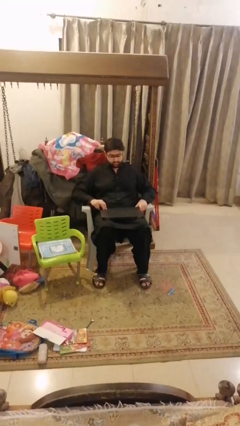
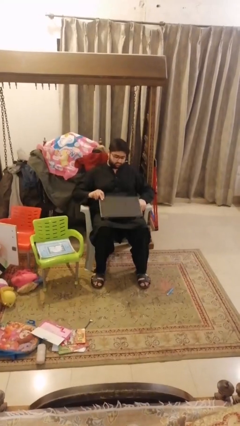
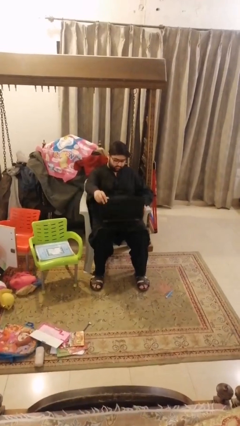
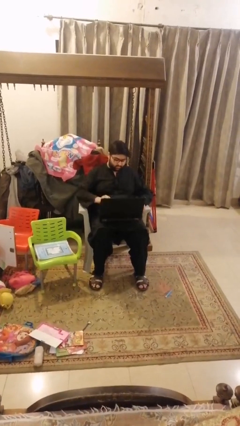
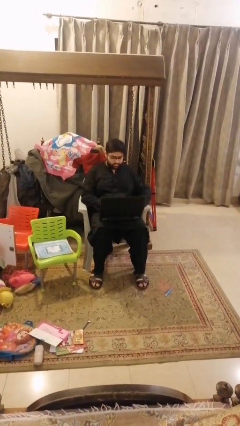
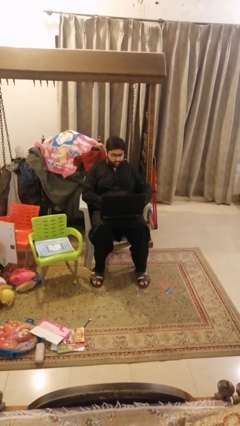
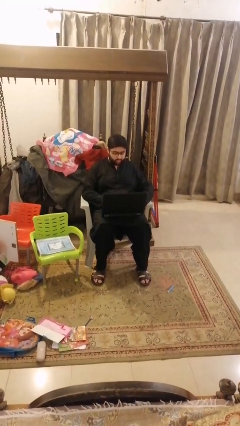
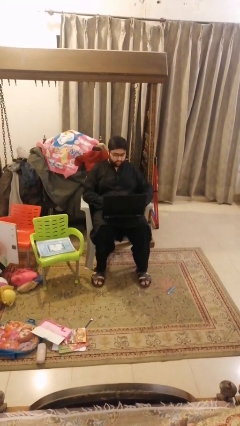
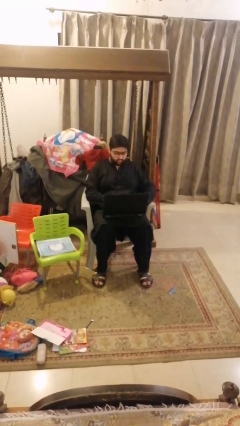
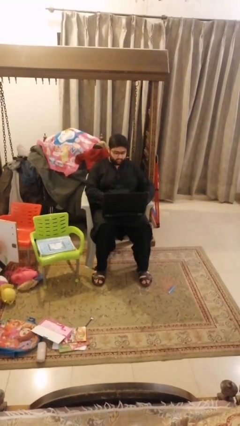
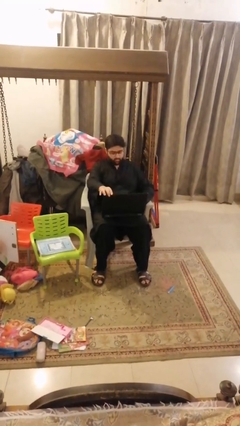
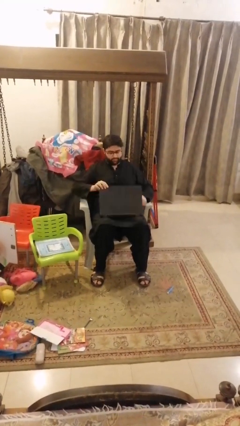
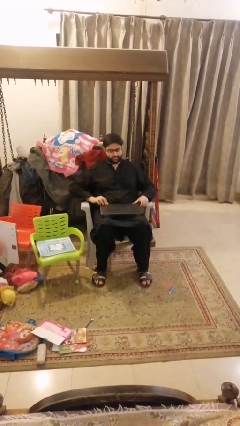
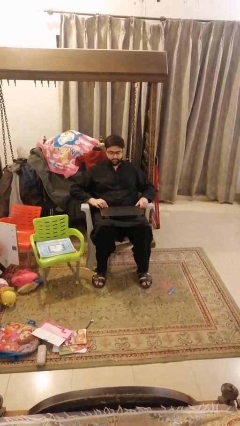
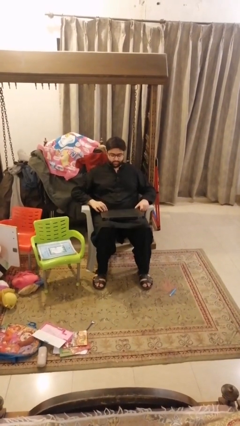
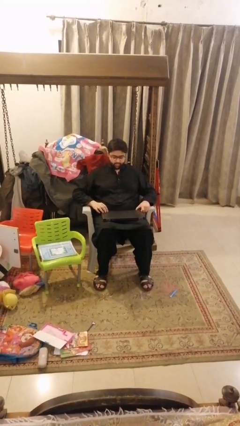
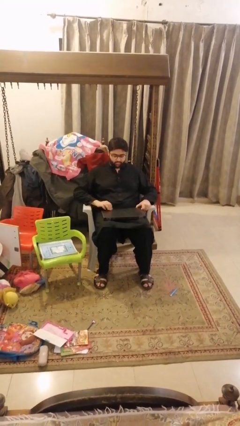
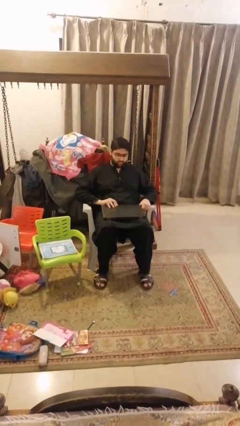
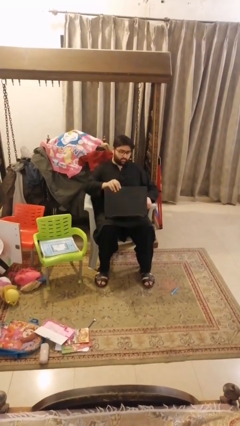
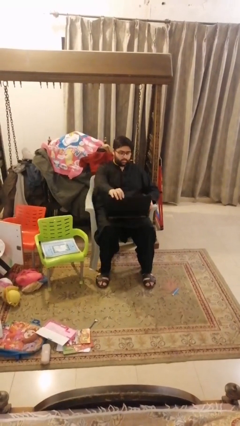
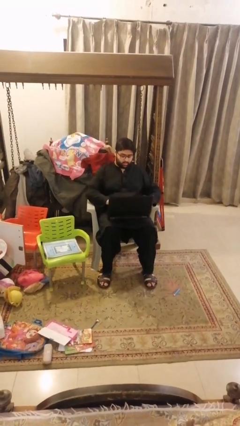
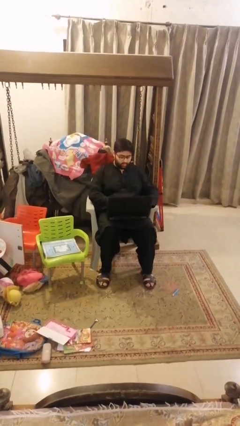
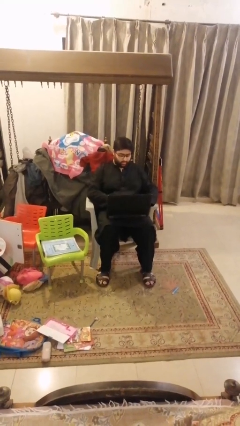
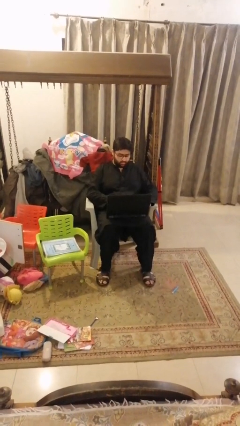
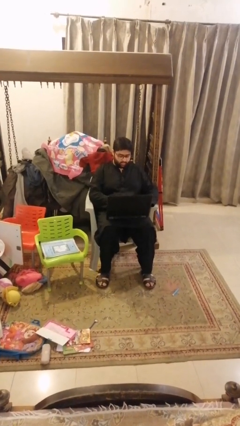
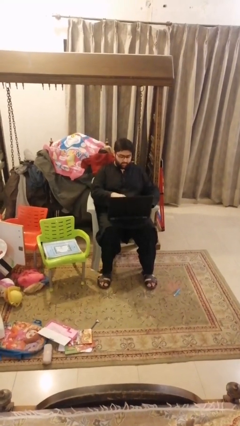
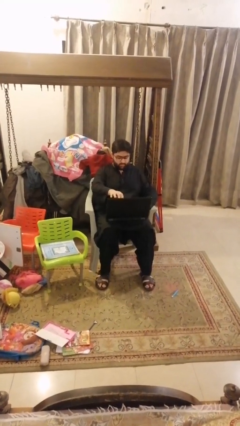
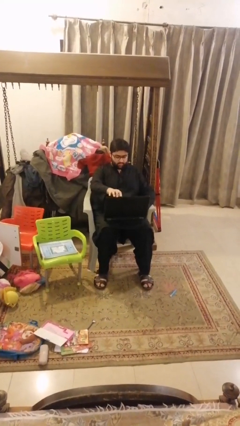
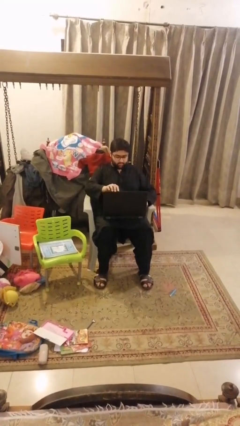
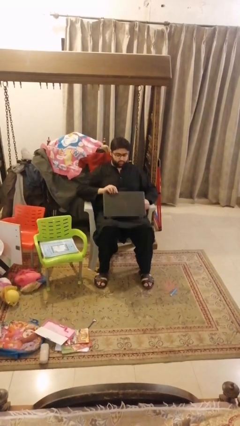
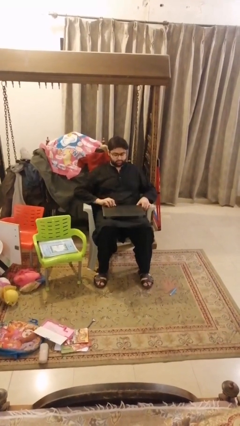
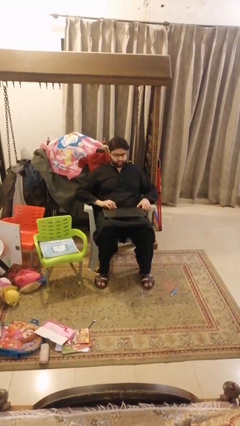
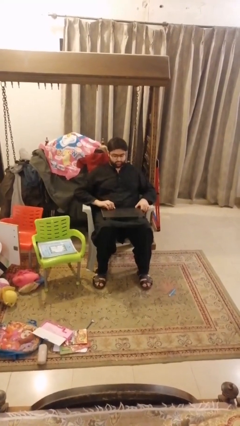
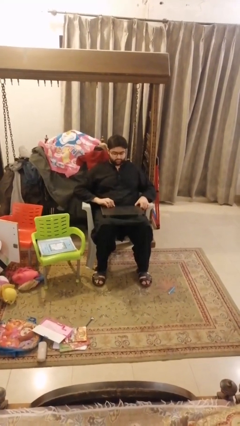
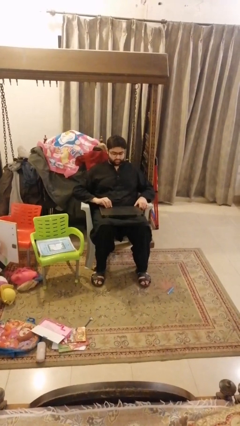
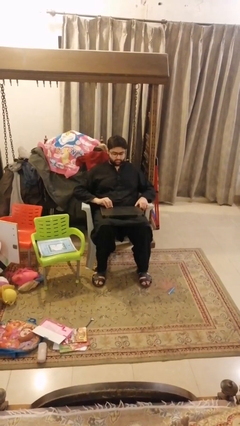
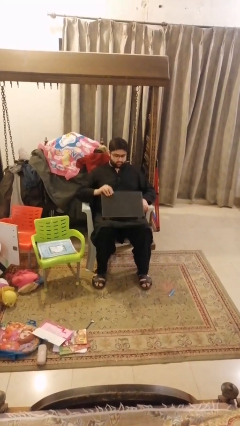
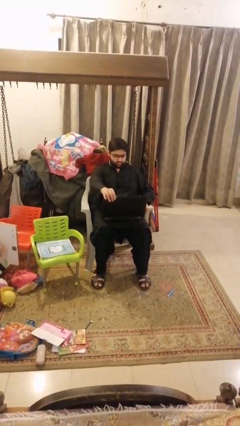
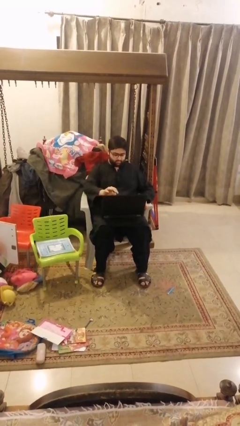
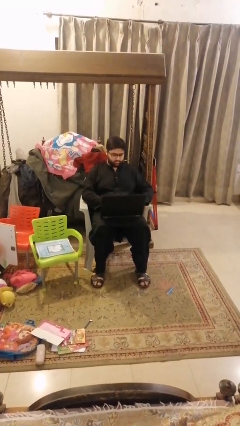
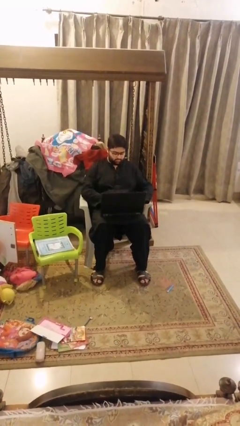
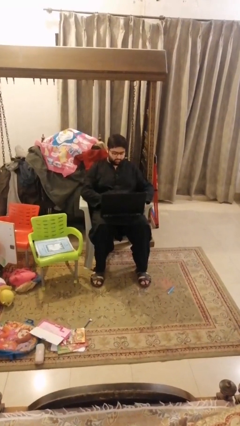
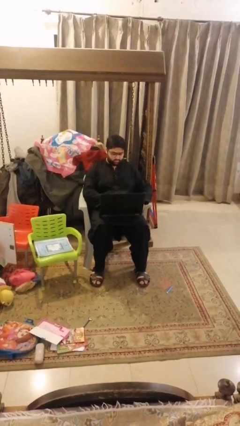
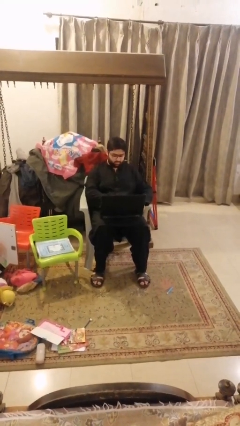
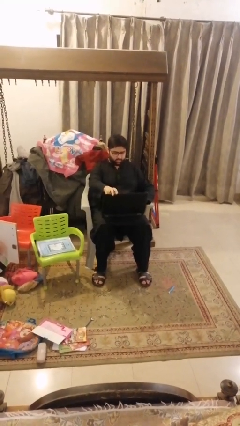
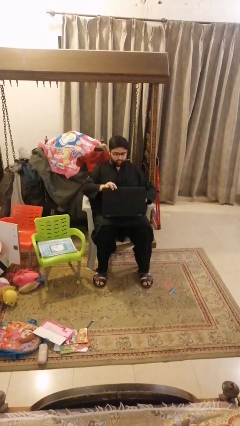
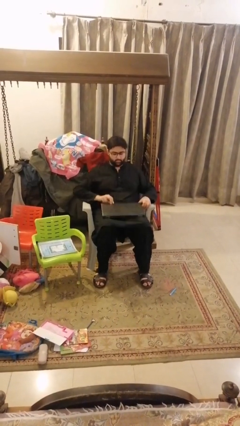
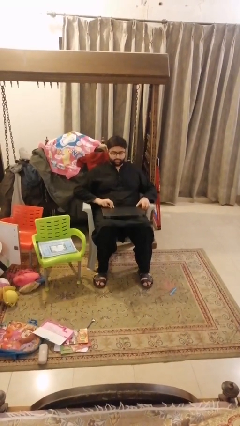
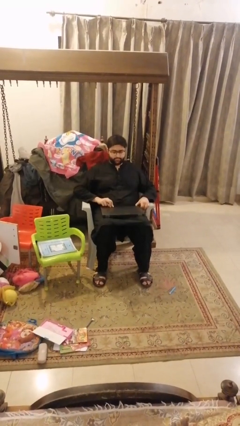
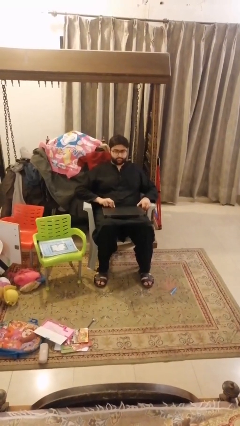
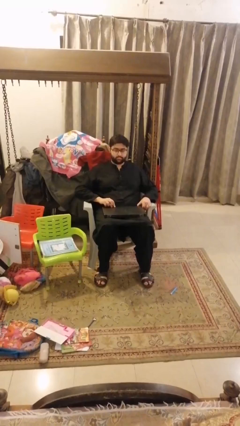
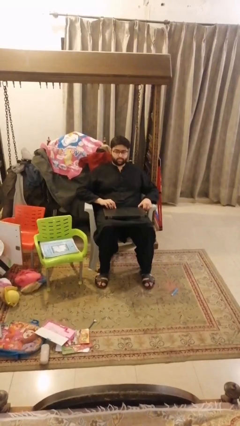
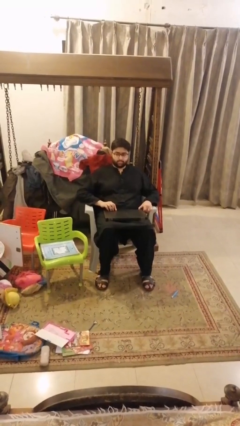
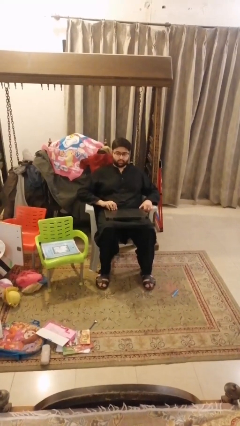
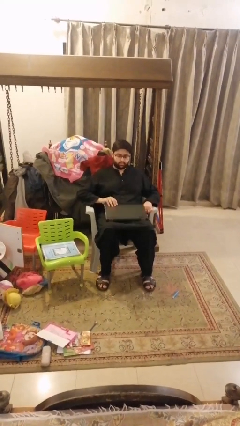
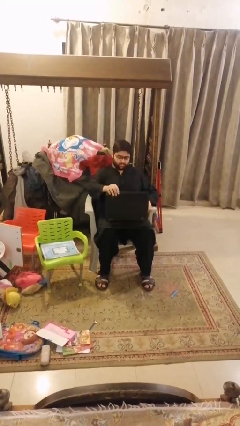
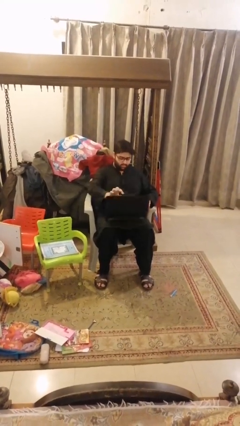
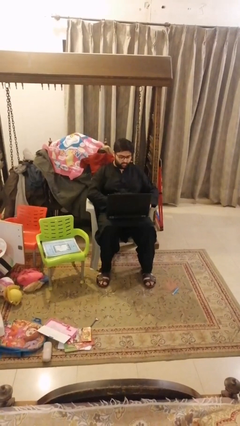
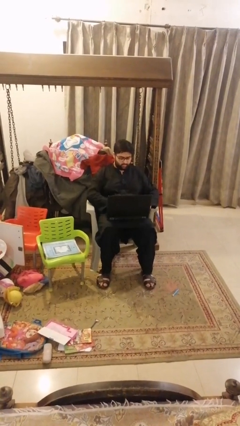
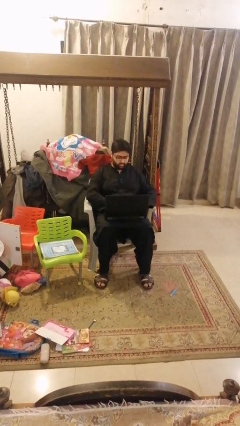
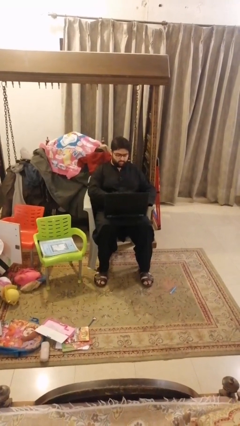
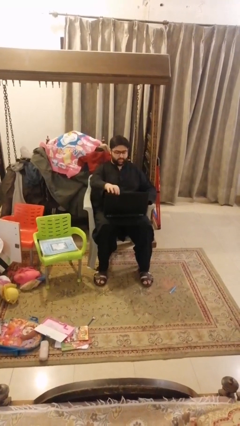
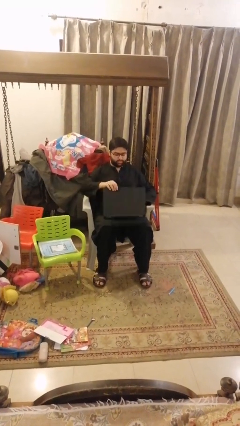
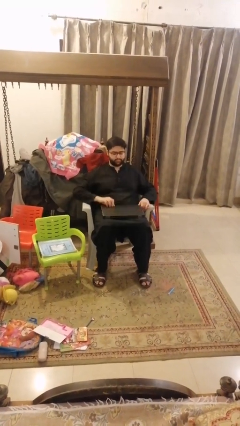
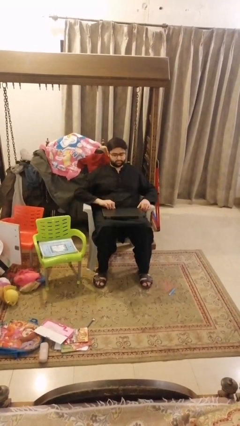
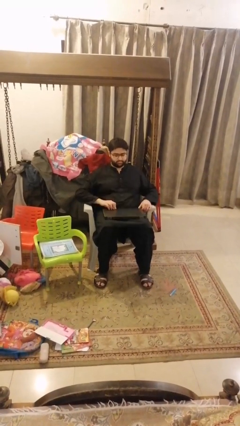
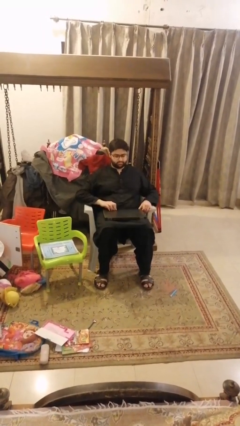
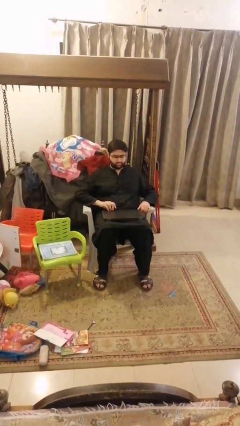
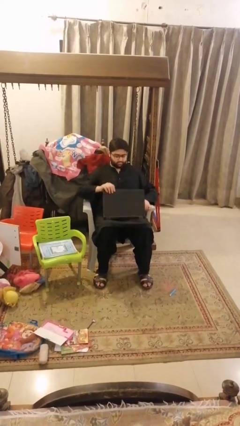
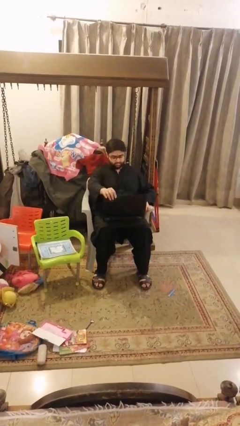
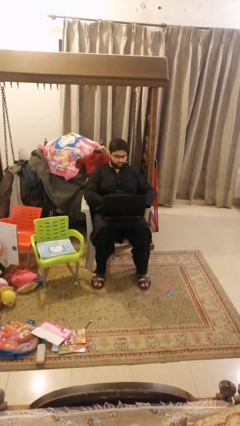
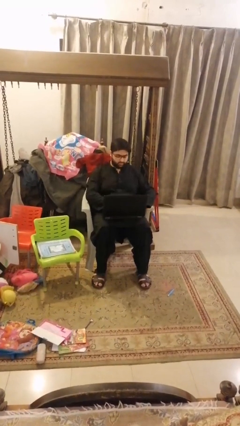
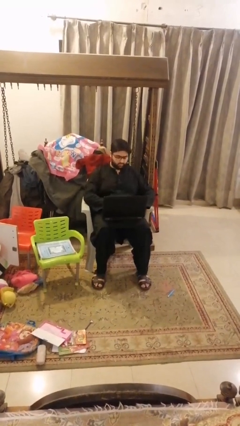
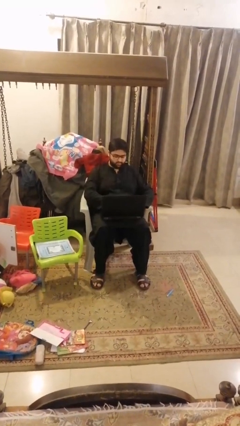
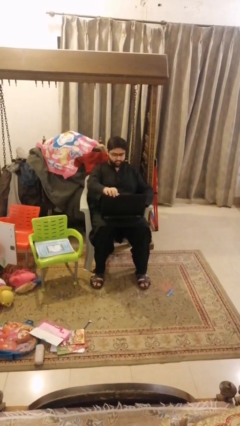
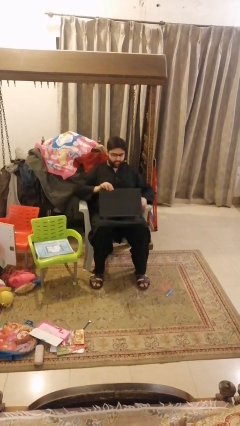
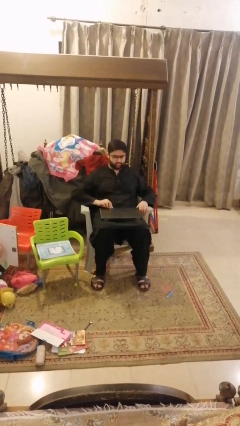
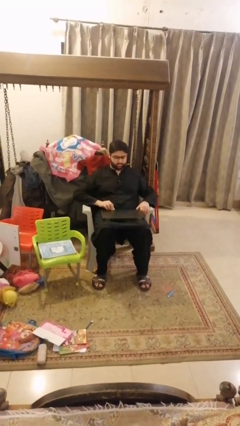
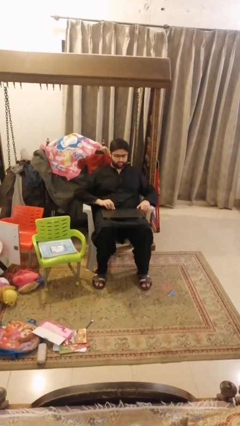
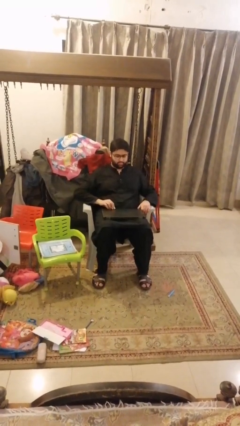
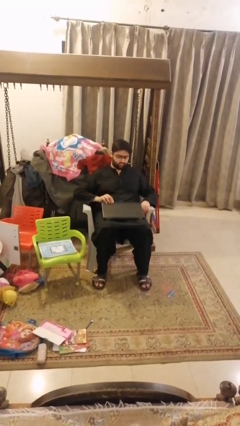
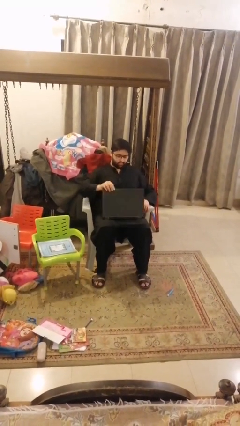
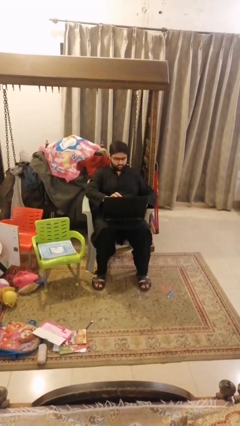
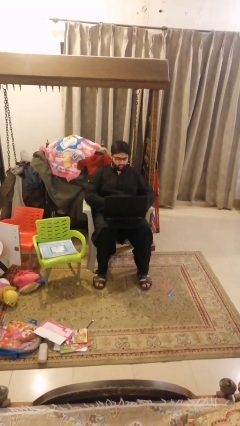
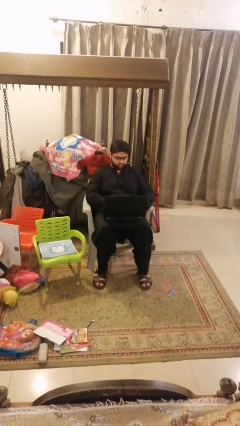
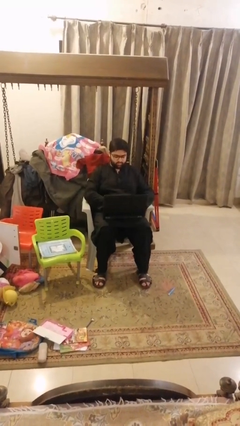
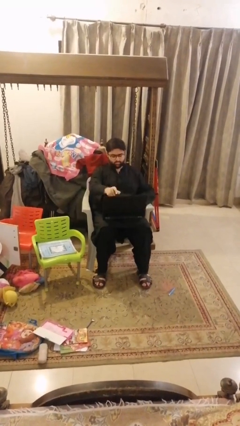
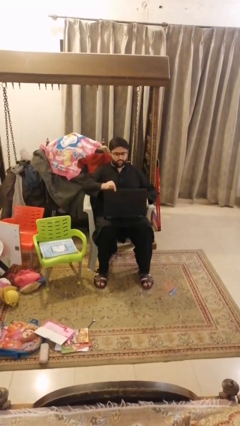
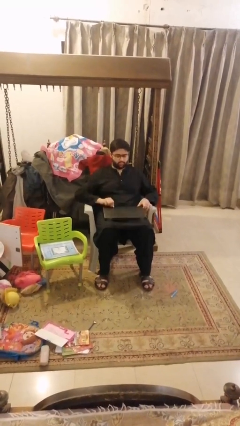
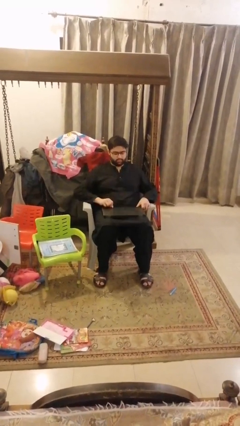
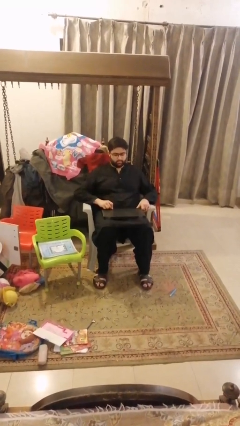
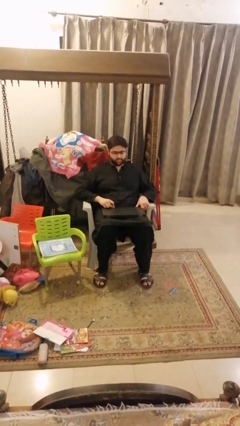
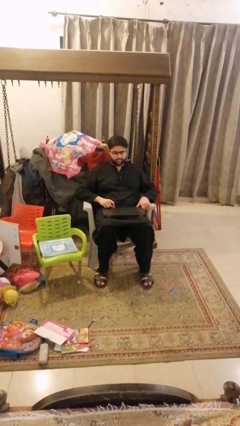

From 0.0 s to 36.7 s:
person interacts with laptop
